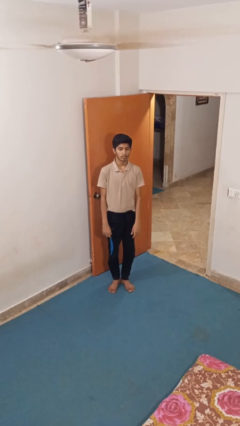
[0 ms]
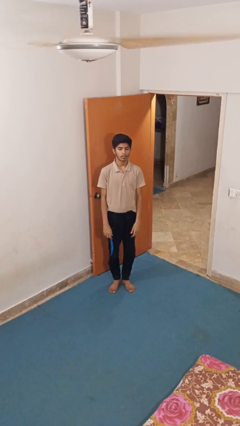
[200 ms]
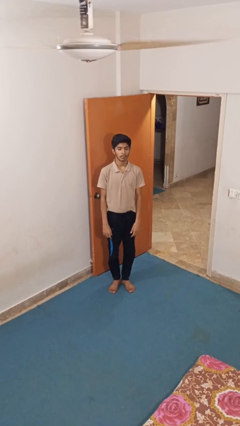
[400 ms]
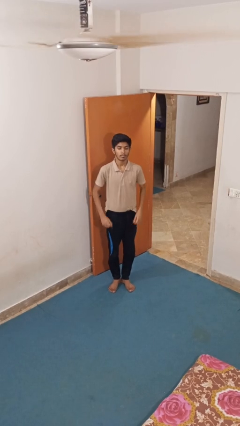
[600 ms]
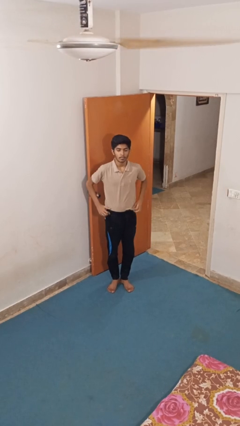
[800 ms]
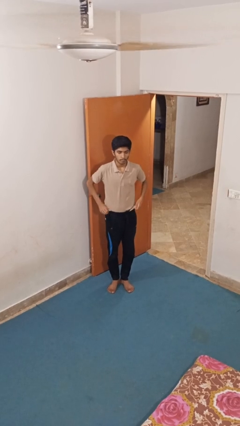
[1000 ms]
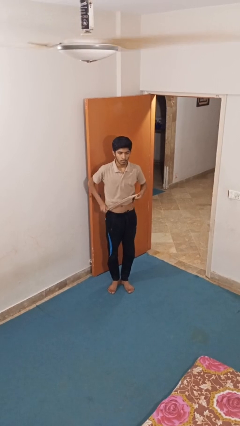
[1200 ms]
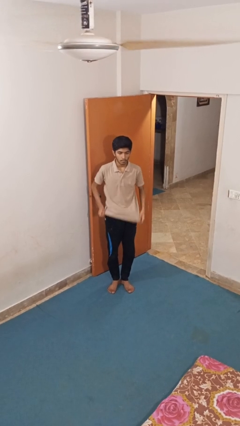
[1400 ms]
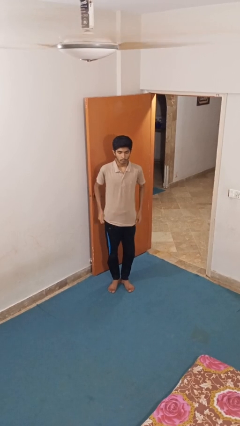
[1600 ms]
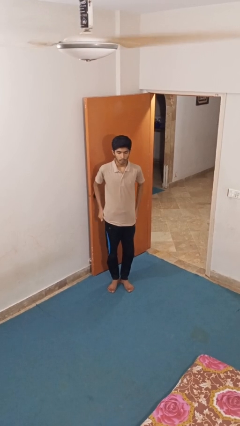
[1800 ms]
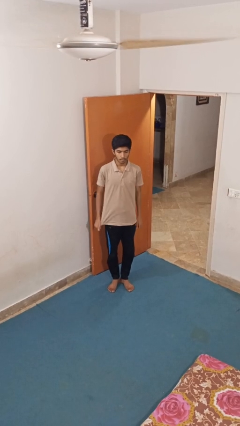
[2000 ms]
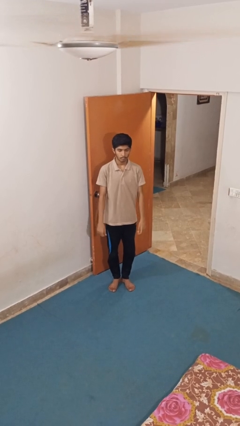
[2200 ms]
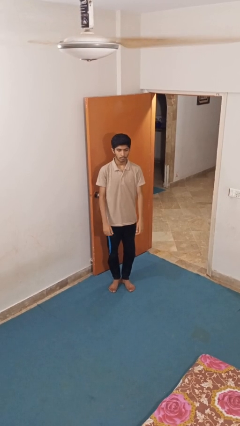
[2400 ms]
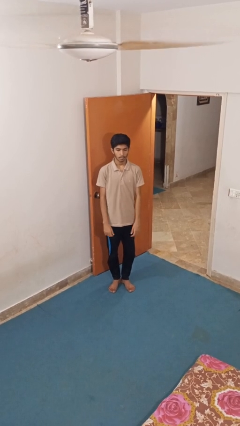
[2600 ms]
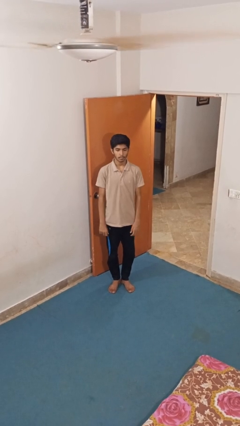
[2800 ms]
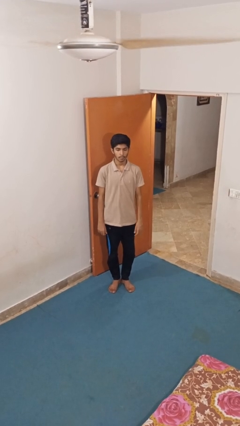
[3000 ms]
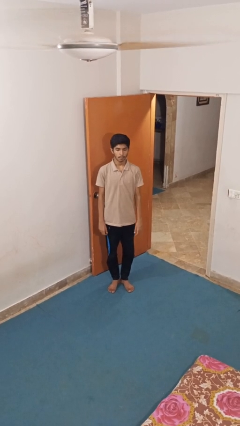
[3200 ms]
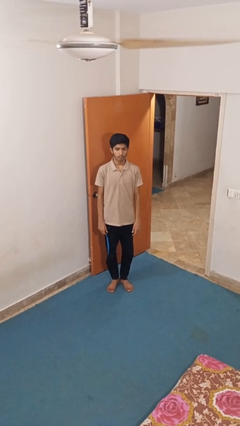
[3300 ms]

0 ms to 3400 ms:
person untucks shirt

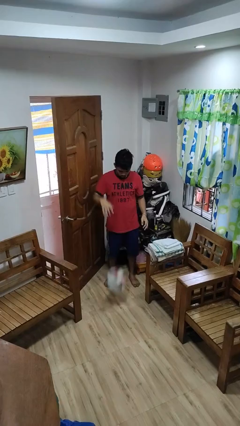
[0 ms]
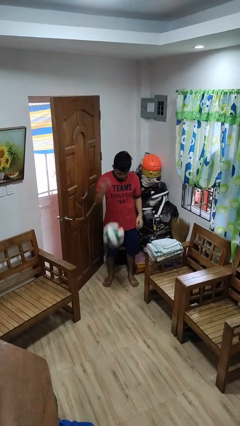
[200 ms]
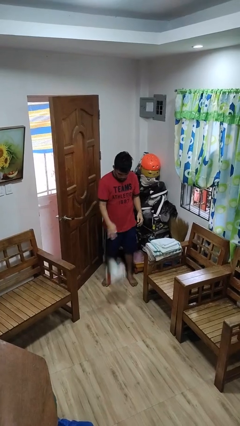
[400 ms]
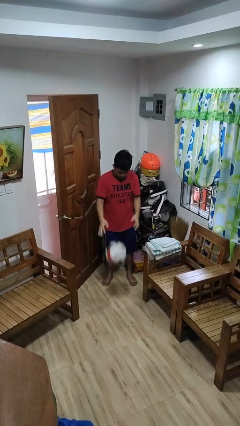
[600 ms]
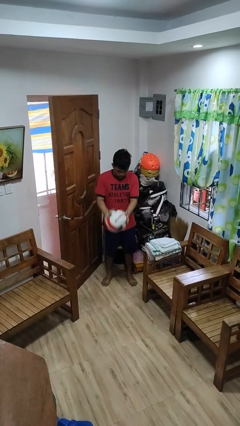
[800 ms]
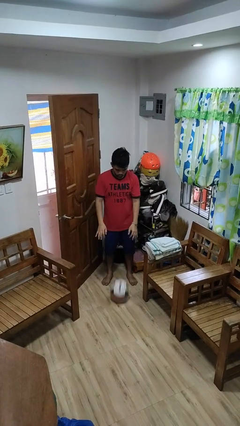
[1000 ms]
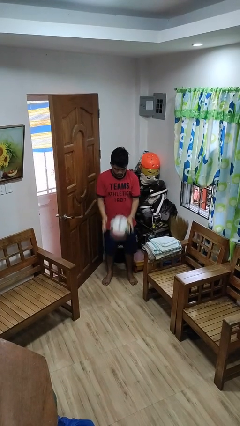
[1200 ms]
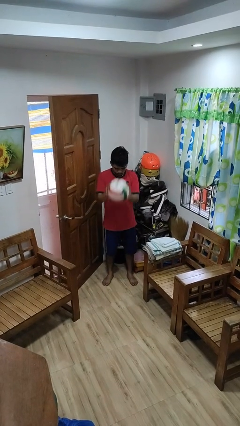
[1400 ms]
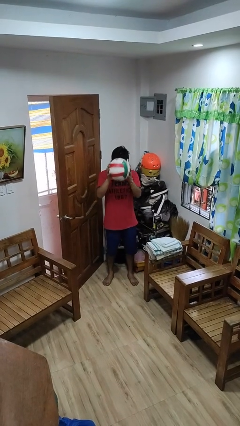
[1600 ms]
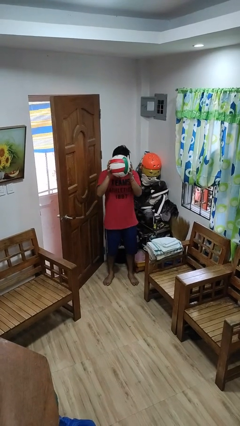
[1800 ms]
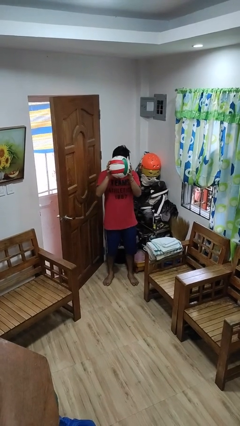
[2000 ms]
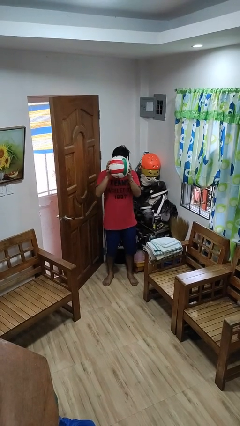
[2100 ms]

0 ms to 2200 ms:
person bounces ball on floor

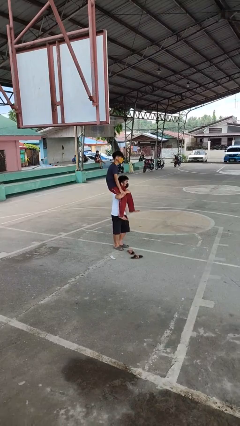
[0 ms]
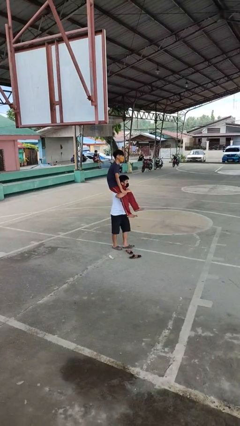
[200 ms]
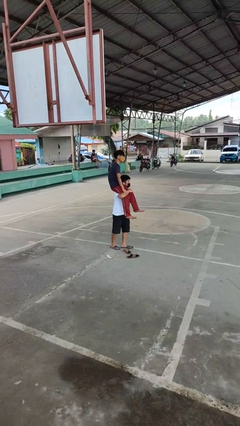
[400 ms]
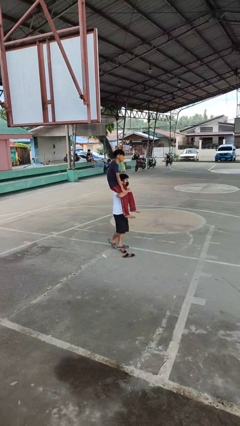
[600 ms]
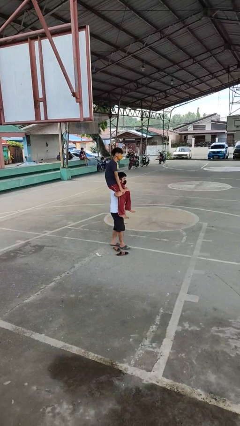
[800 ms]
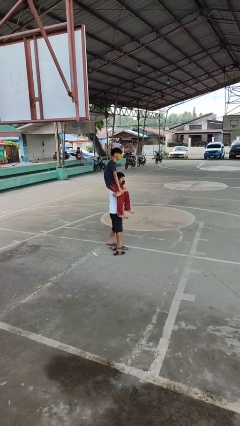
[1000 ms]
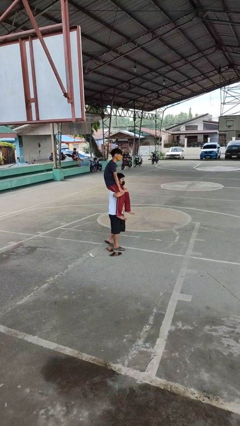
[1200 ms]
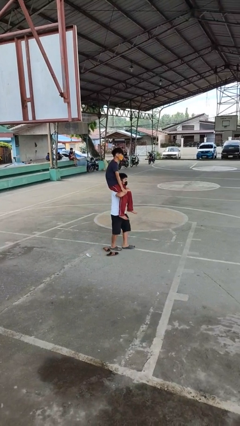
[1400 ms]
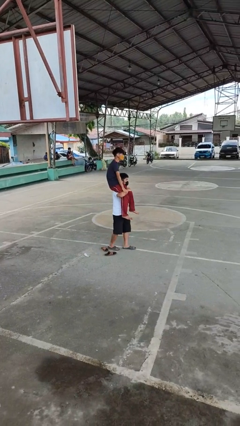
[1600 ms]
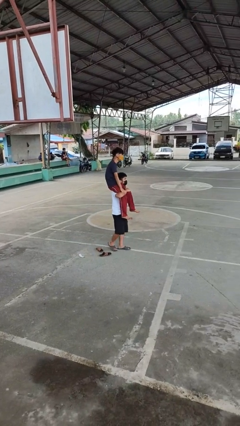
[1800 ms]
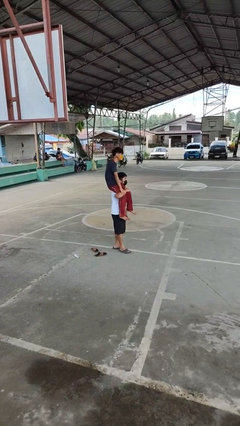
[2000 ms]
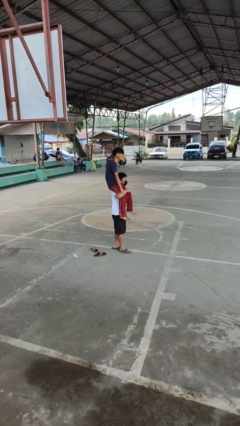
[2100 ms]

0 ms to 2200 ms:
person carries person on shoulders

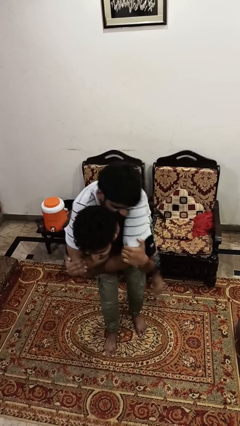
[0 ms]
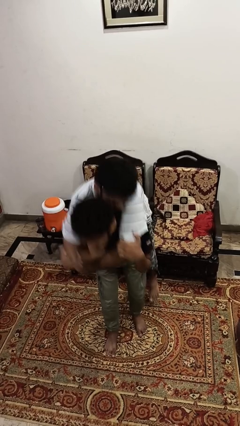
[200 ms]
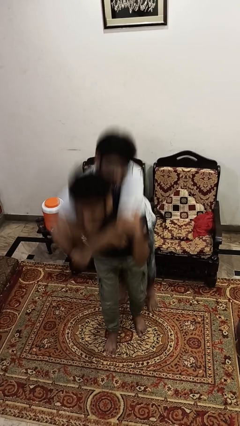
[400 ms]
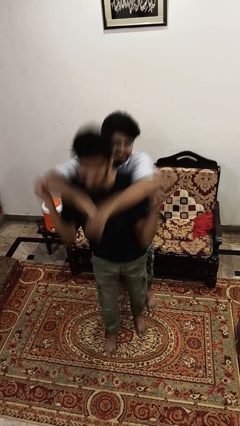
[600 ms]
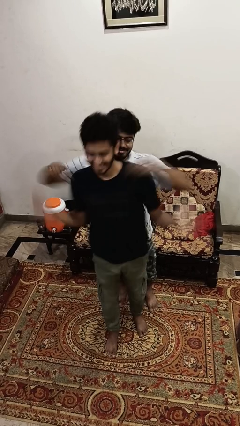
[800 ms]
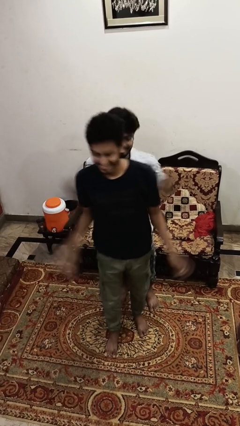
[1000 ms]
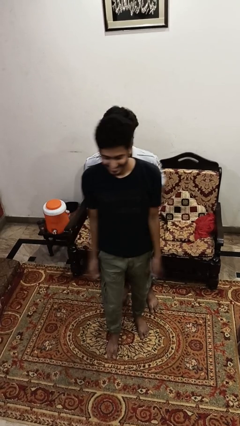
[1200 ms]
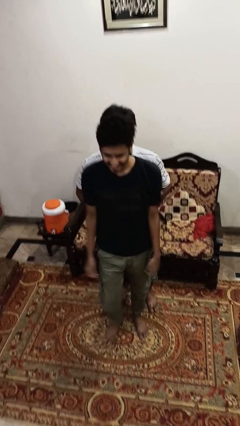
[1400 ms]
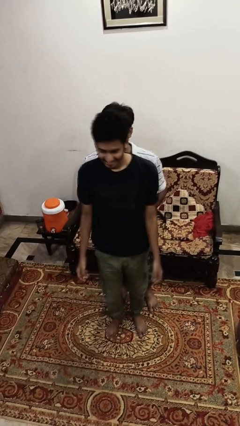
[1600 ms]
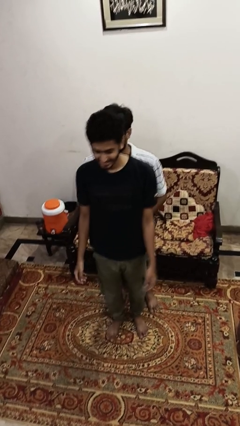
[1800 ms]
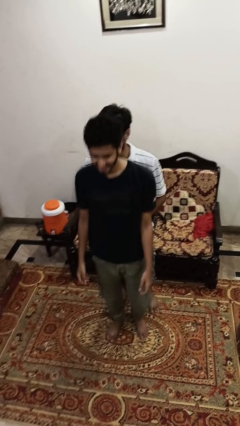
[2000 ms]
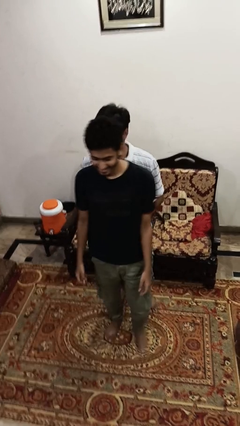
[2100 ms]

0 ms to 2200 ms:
person puts down person

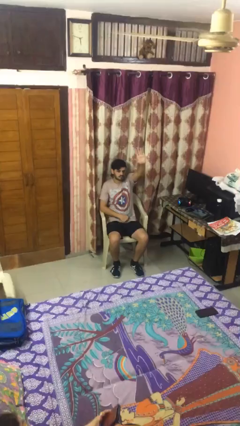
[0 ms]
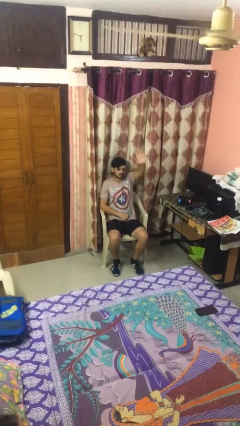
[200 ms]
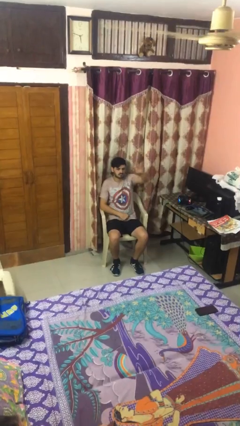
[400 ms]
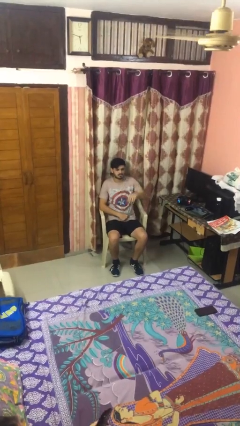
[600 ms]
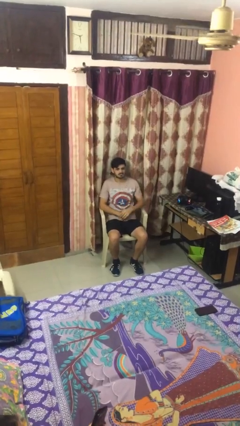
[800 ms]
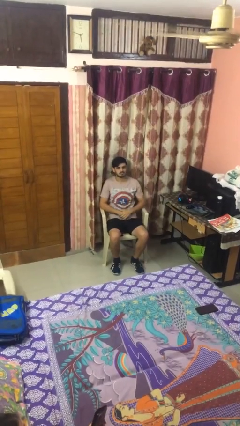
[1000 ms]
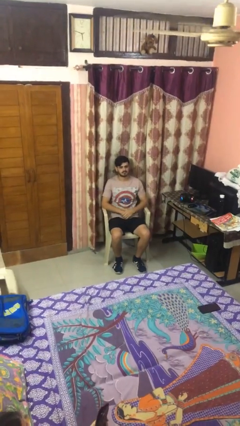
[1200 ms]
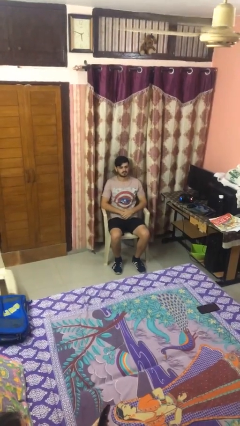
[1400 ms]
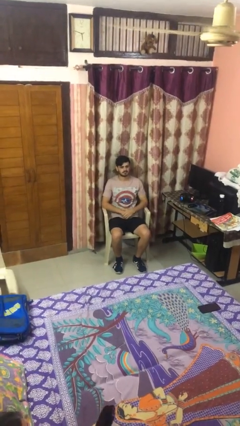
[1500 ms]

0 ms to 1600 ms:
person gestures lower hand

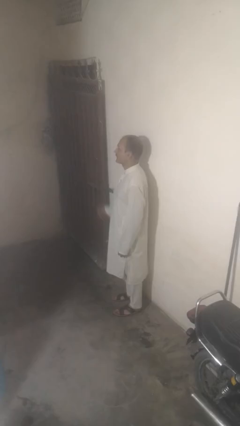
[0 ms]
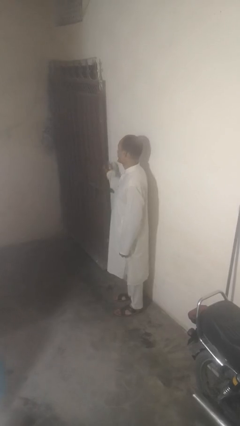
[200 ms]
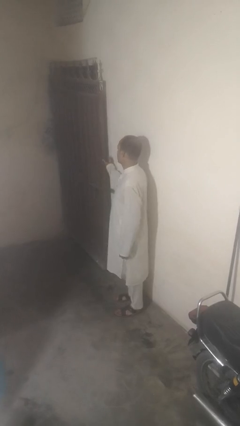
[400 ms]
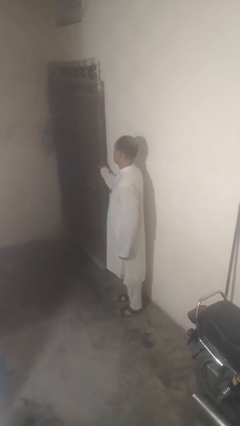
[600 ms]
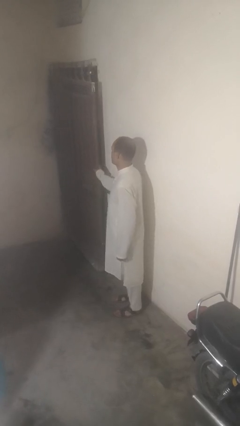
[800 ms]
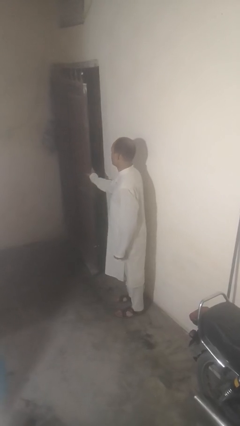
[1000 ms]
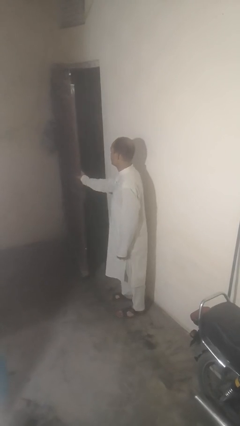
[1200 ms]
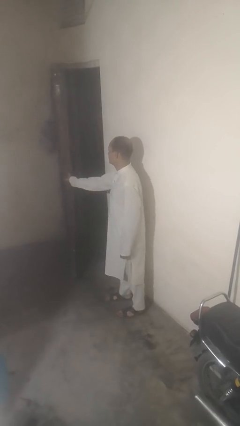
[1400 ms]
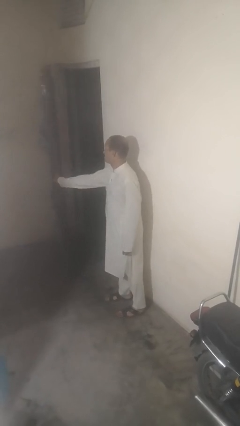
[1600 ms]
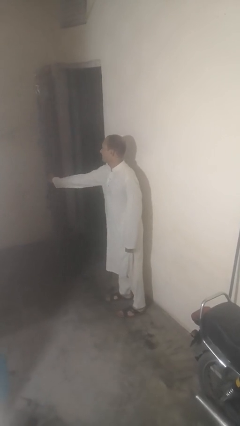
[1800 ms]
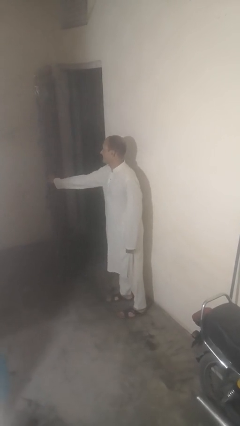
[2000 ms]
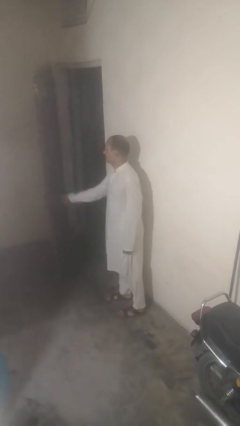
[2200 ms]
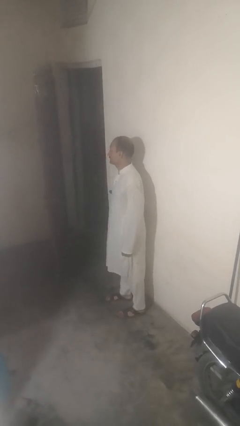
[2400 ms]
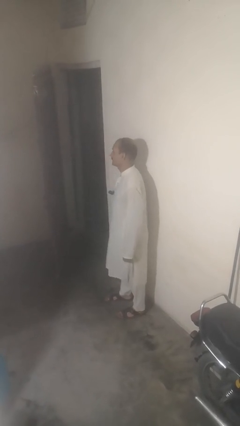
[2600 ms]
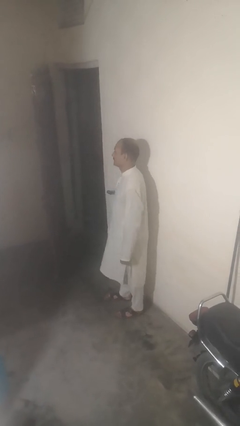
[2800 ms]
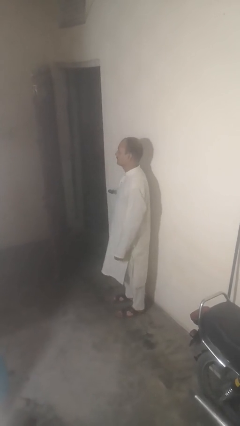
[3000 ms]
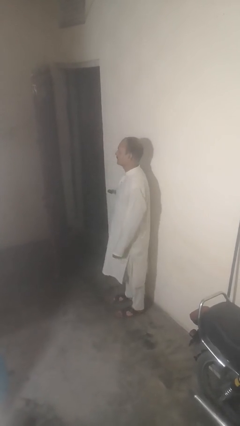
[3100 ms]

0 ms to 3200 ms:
person opens gate

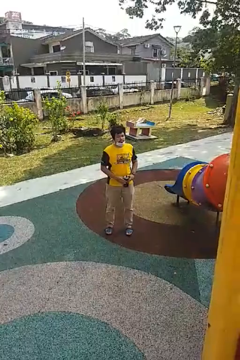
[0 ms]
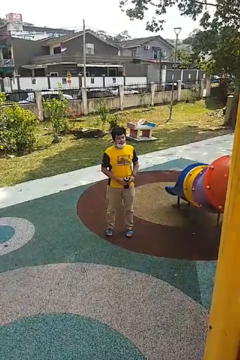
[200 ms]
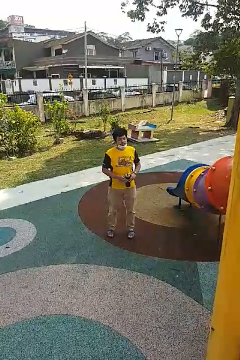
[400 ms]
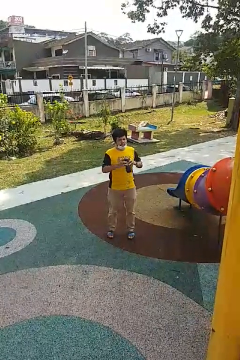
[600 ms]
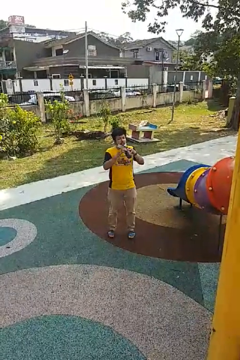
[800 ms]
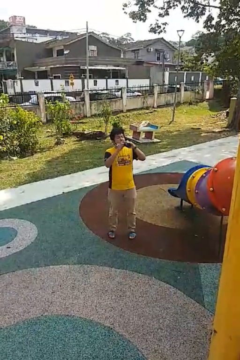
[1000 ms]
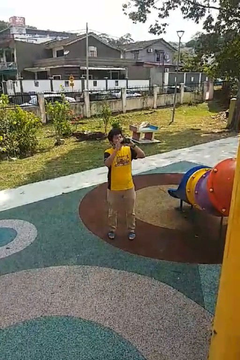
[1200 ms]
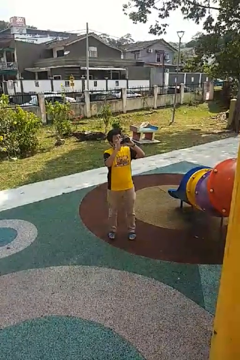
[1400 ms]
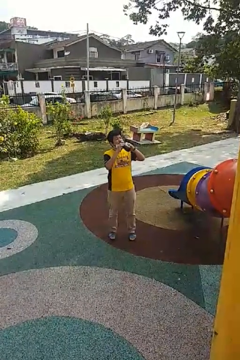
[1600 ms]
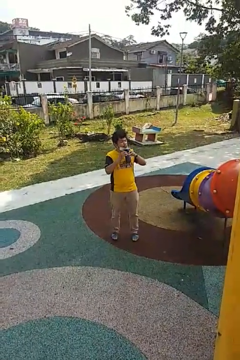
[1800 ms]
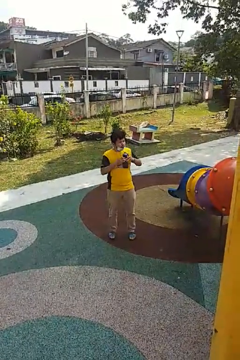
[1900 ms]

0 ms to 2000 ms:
person drinks from bottle

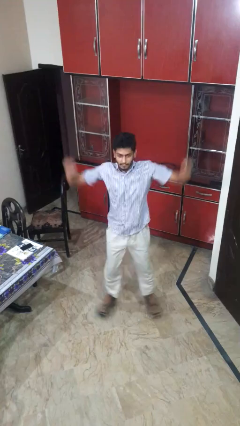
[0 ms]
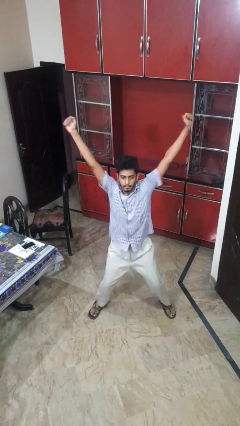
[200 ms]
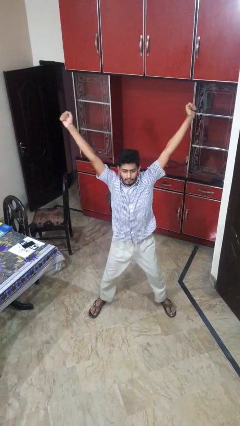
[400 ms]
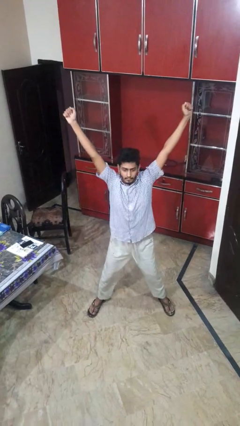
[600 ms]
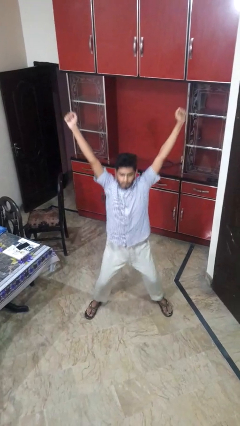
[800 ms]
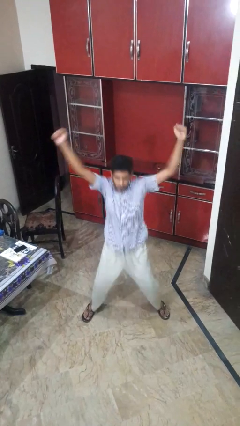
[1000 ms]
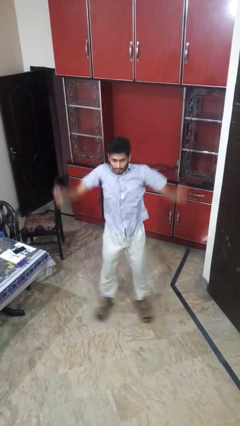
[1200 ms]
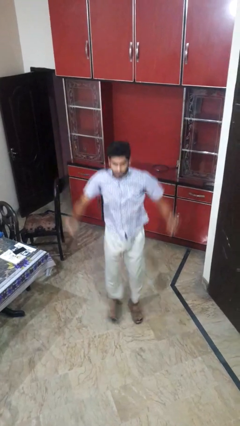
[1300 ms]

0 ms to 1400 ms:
person exercises with jumping jacks
